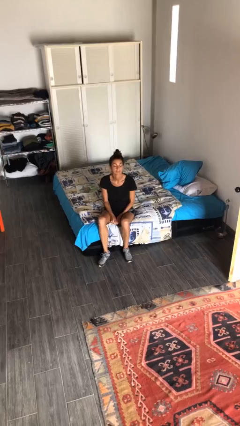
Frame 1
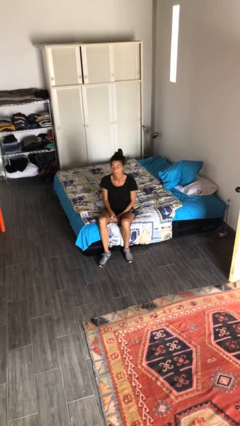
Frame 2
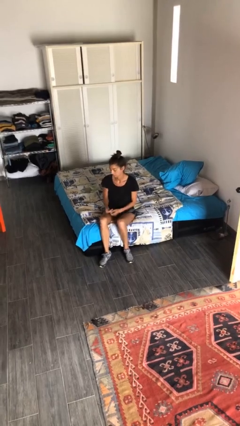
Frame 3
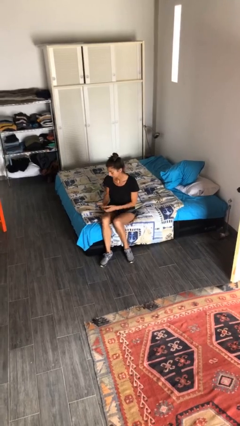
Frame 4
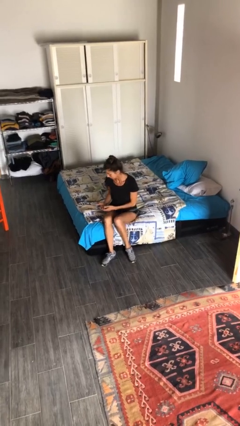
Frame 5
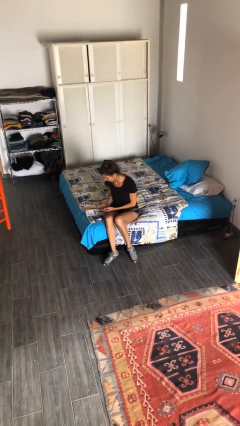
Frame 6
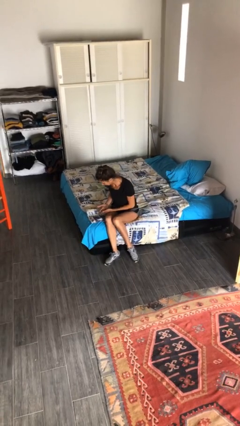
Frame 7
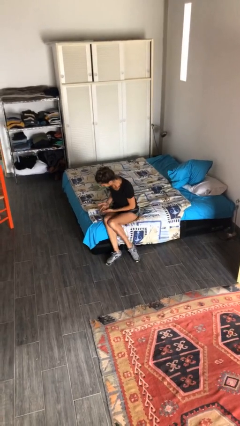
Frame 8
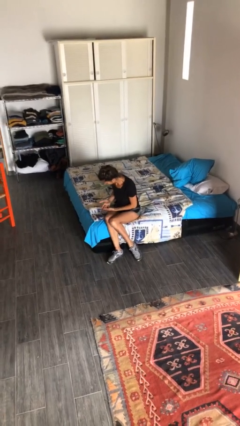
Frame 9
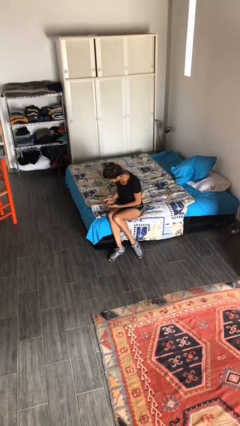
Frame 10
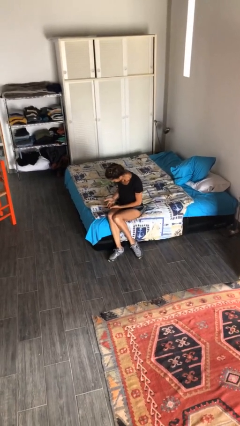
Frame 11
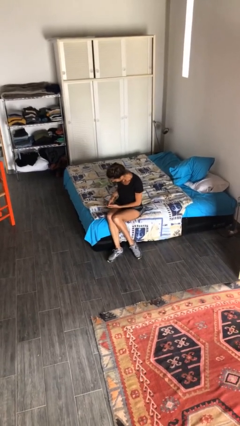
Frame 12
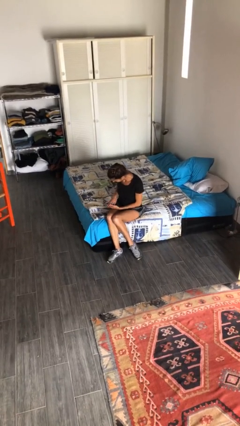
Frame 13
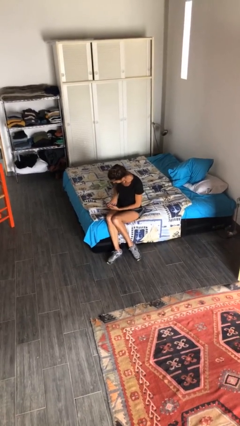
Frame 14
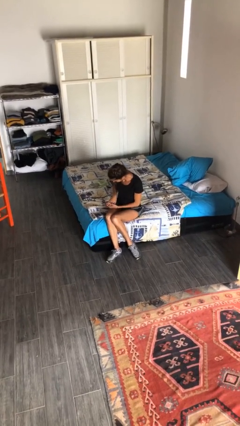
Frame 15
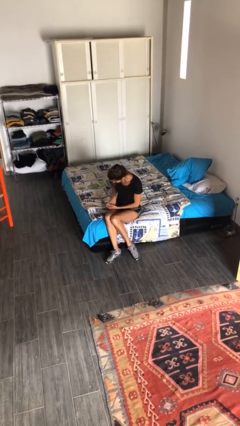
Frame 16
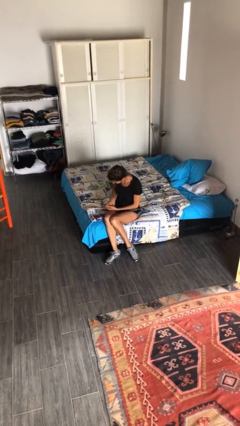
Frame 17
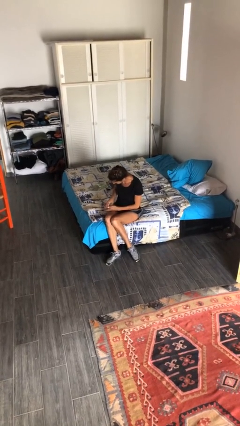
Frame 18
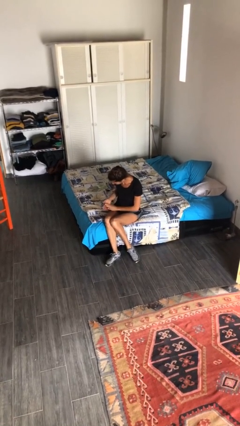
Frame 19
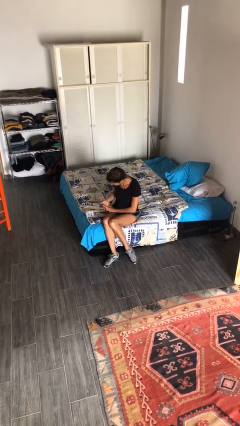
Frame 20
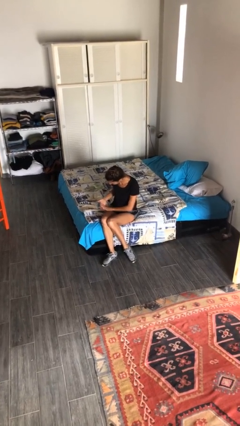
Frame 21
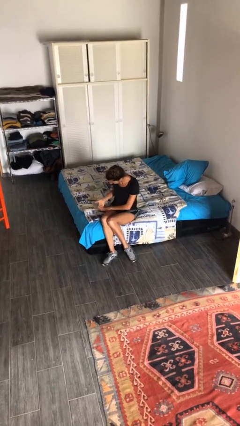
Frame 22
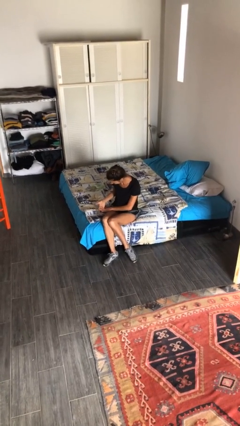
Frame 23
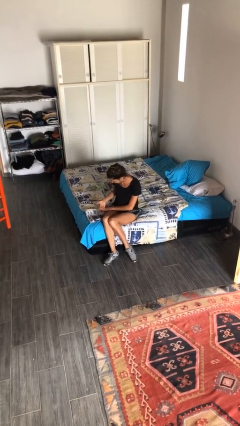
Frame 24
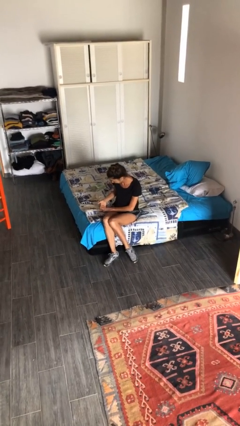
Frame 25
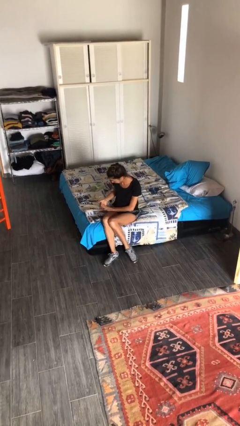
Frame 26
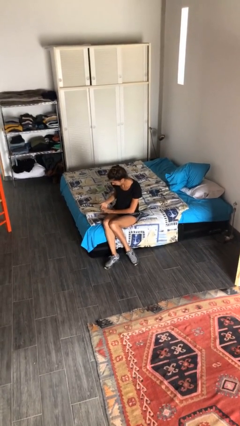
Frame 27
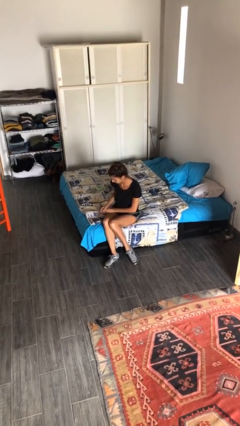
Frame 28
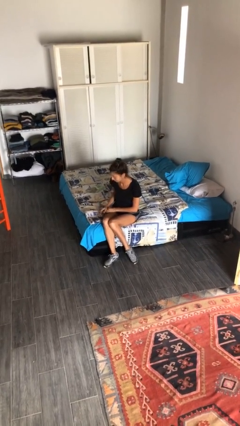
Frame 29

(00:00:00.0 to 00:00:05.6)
person looks at hands in lap

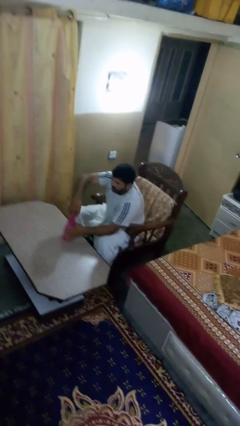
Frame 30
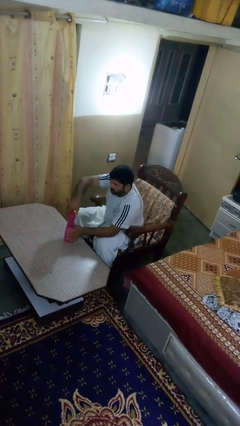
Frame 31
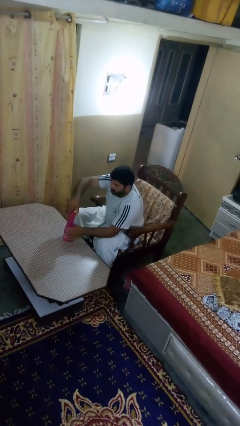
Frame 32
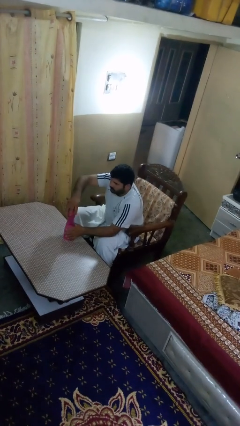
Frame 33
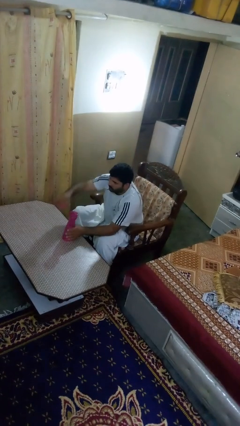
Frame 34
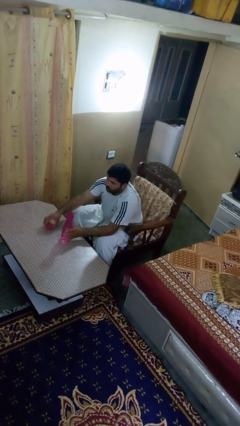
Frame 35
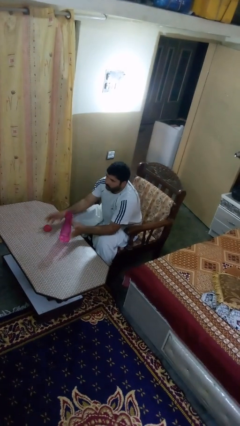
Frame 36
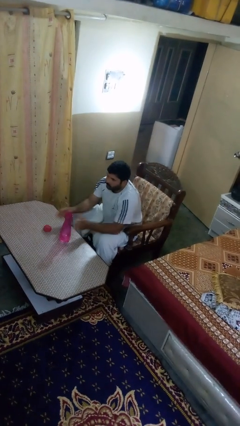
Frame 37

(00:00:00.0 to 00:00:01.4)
person unscrews lid from bottle

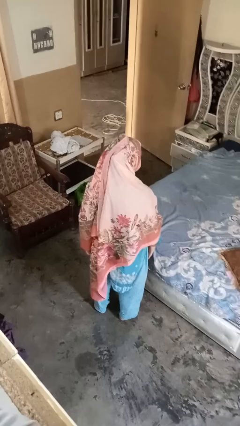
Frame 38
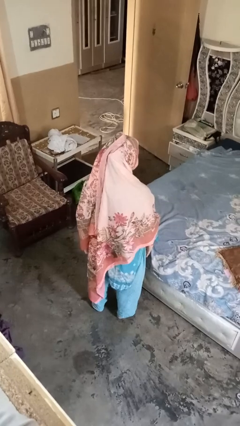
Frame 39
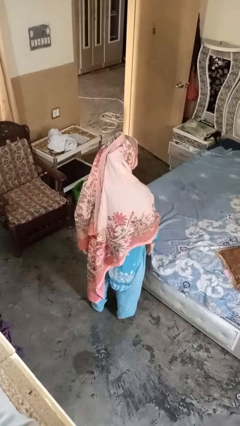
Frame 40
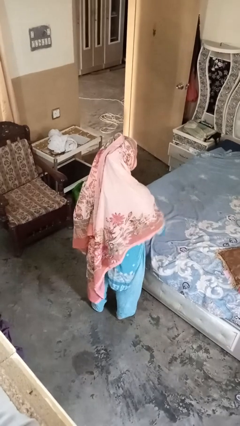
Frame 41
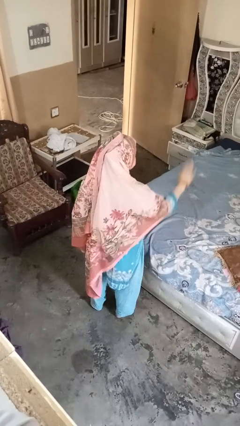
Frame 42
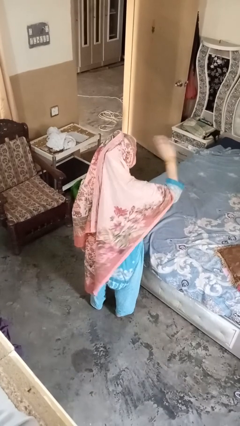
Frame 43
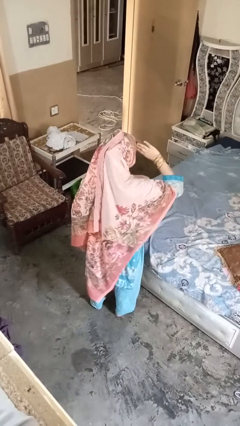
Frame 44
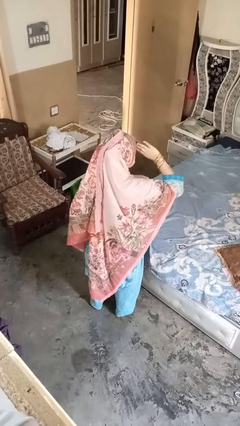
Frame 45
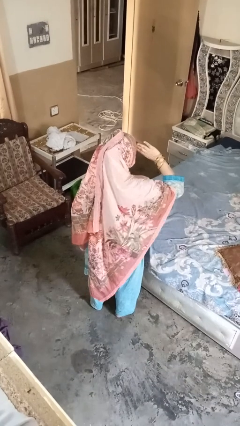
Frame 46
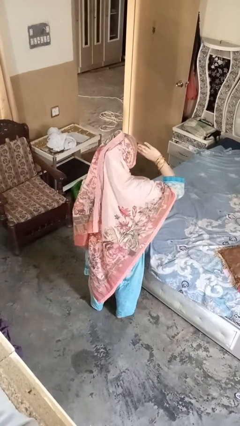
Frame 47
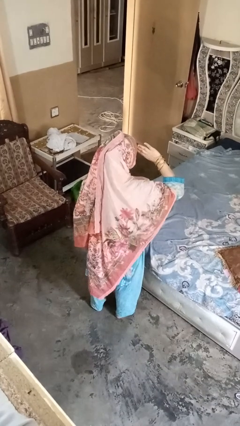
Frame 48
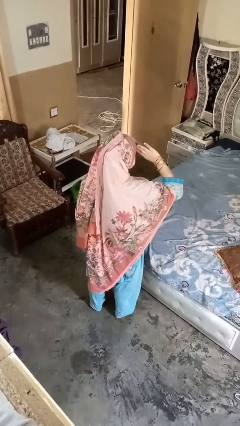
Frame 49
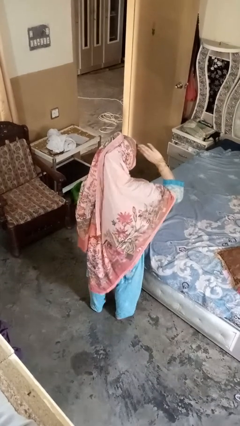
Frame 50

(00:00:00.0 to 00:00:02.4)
person salutes

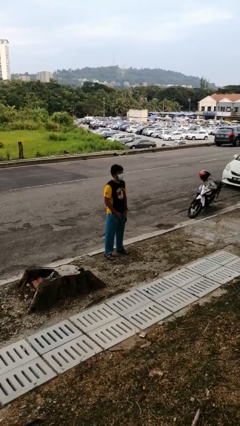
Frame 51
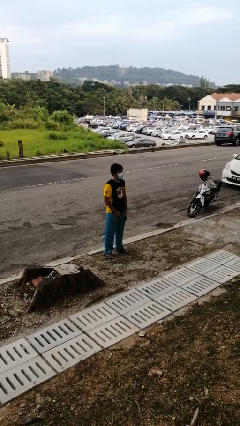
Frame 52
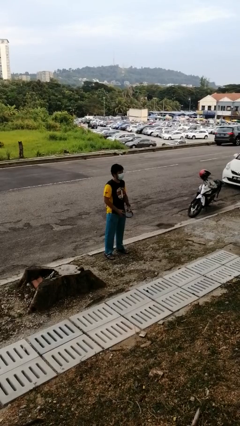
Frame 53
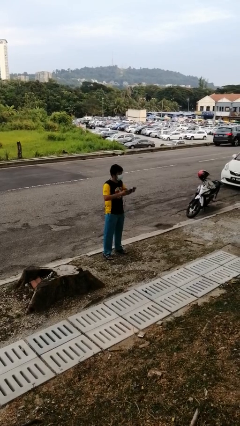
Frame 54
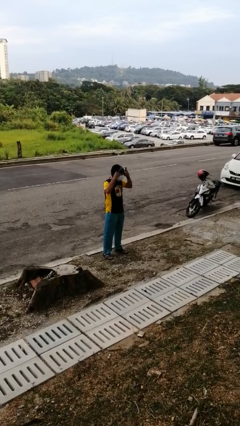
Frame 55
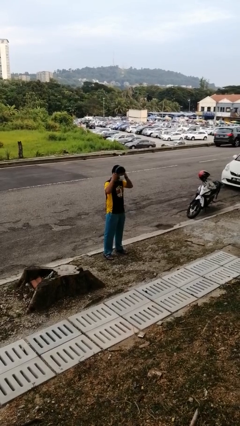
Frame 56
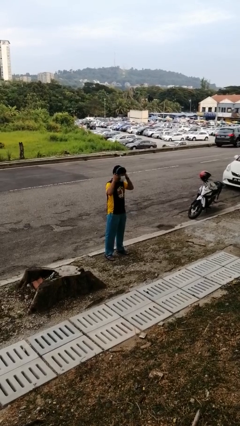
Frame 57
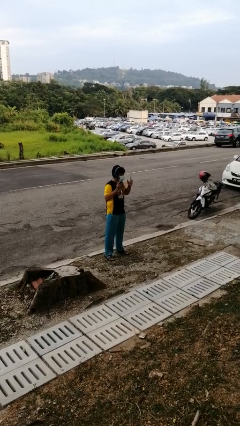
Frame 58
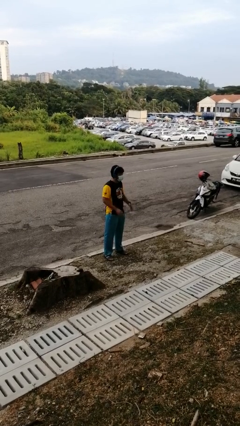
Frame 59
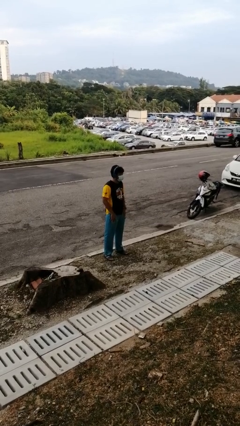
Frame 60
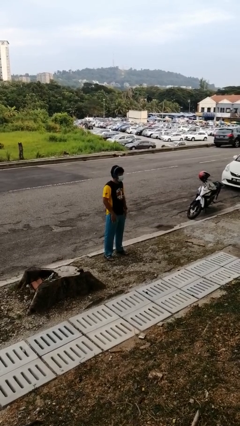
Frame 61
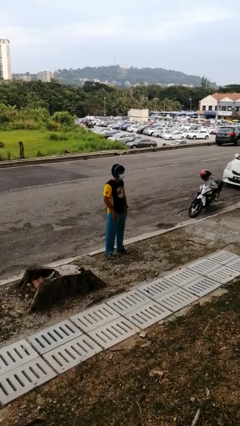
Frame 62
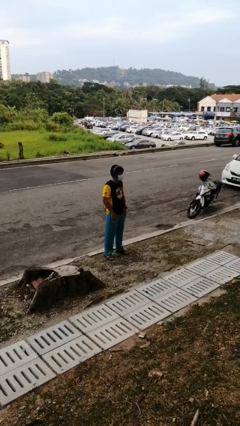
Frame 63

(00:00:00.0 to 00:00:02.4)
person puts on headphones

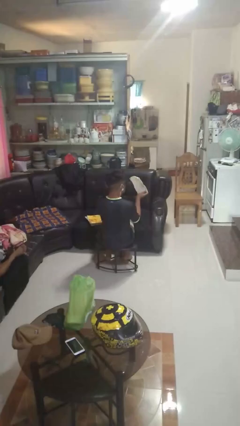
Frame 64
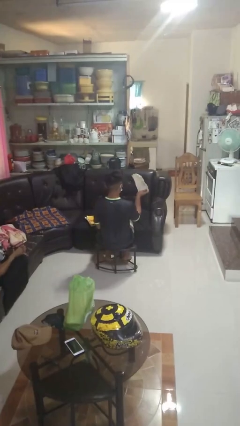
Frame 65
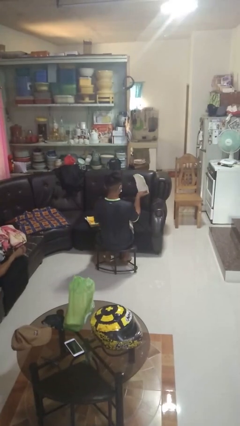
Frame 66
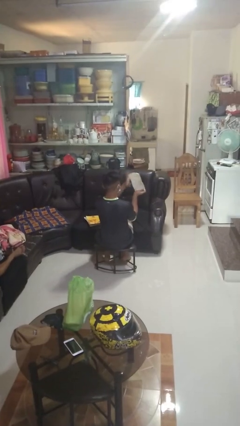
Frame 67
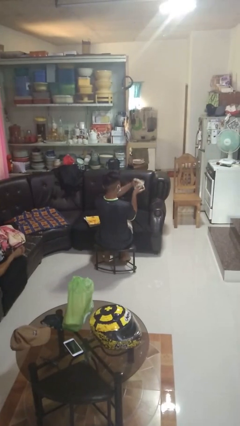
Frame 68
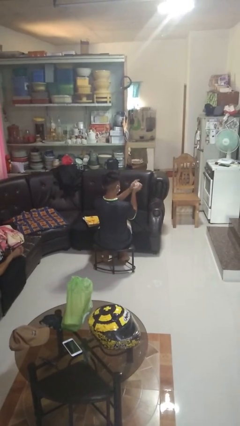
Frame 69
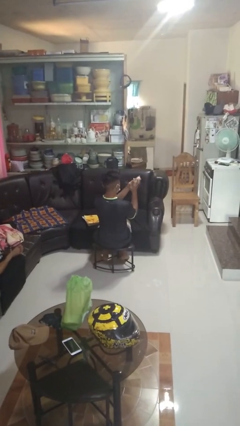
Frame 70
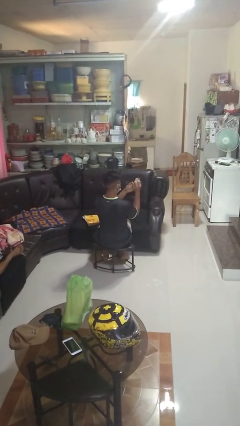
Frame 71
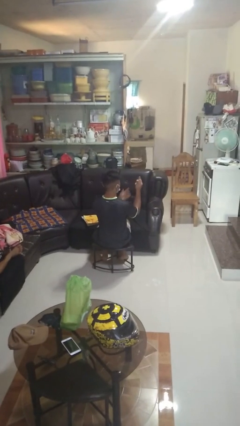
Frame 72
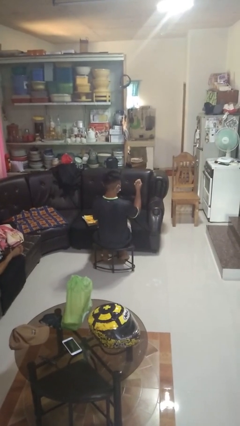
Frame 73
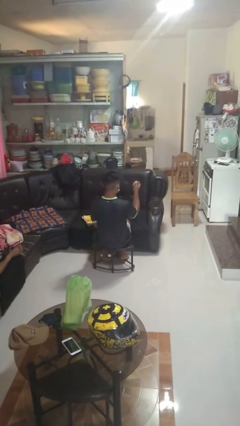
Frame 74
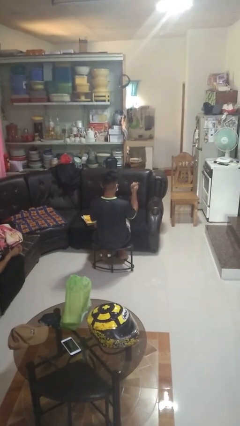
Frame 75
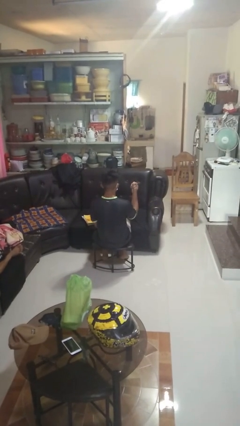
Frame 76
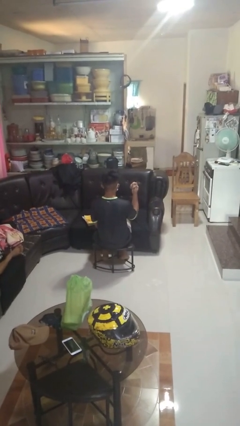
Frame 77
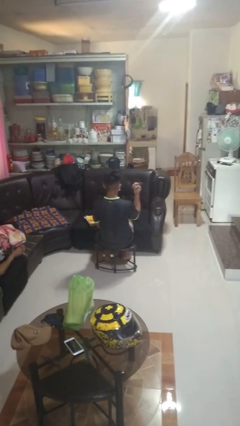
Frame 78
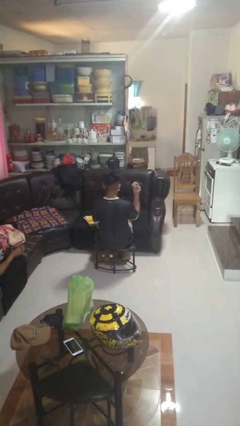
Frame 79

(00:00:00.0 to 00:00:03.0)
person crumples paper

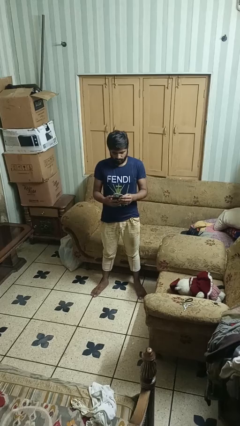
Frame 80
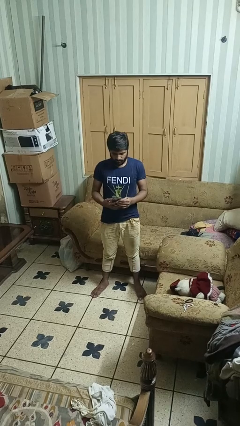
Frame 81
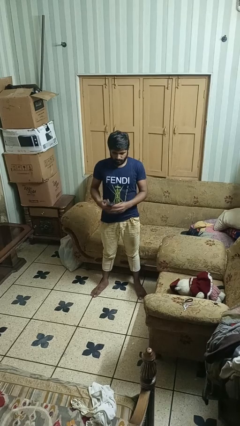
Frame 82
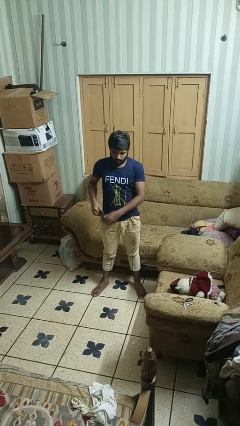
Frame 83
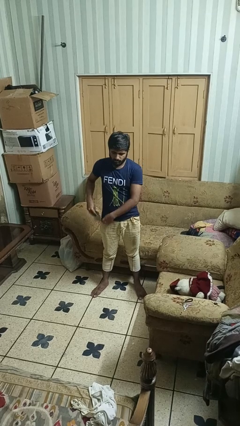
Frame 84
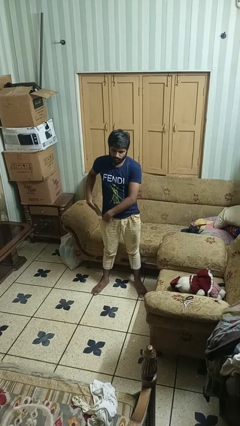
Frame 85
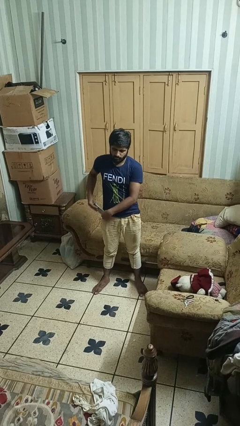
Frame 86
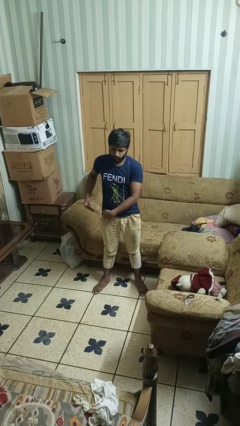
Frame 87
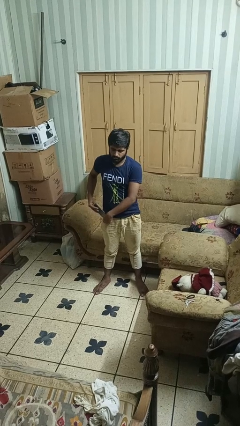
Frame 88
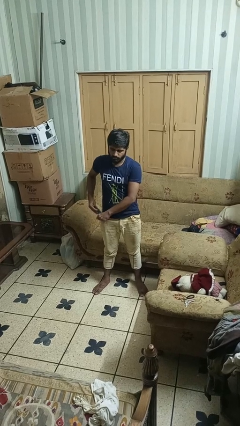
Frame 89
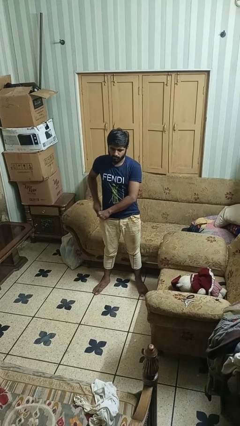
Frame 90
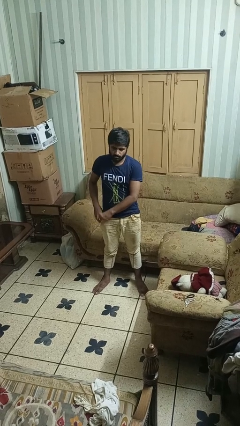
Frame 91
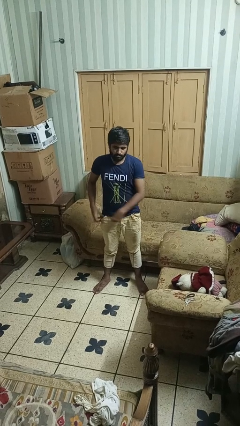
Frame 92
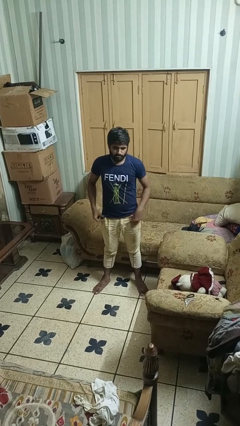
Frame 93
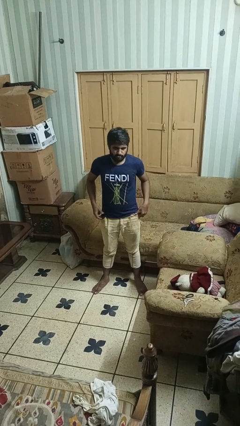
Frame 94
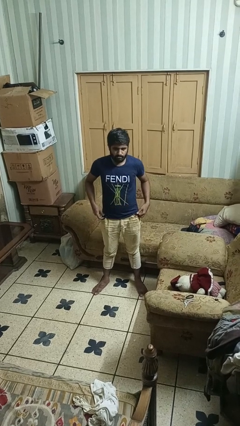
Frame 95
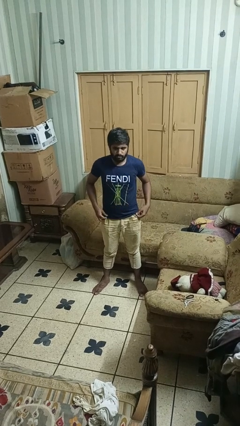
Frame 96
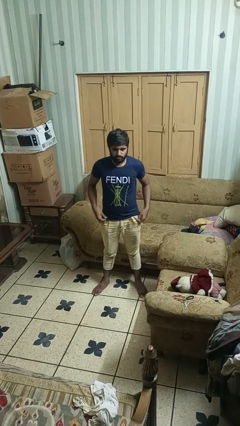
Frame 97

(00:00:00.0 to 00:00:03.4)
person puts phone into pocket
